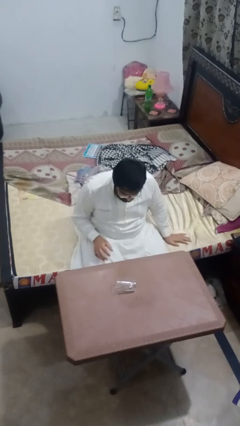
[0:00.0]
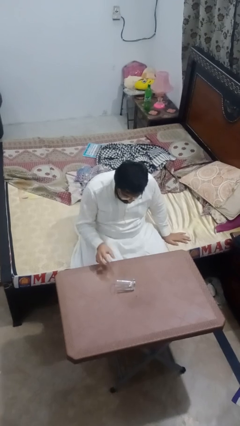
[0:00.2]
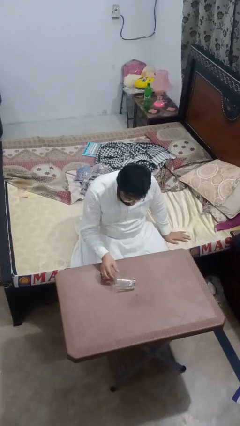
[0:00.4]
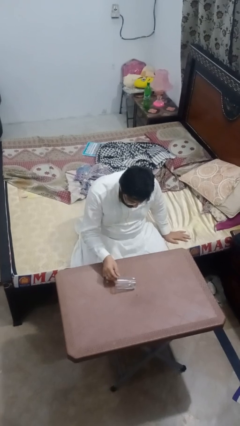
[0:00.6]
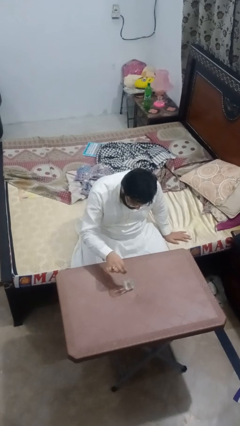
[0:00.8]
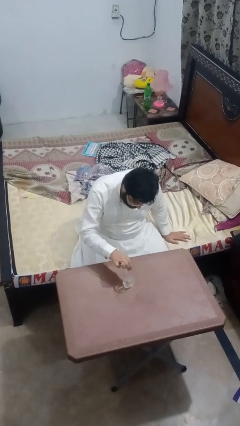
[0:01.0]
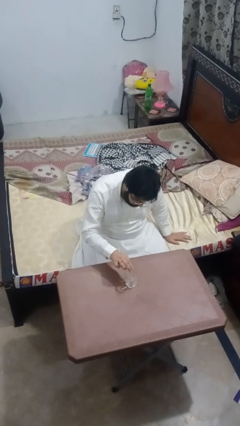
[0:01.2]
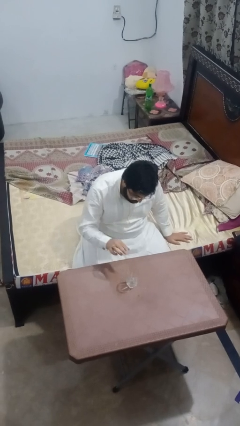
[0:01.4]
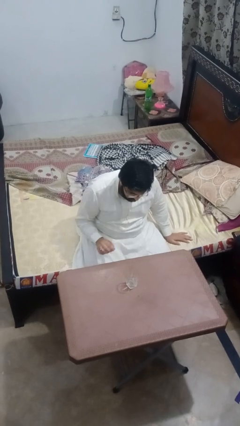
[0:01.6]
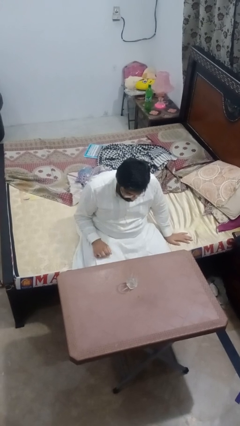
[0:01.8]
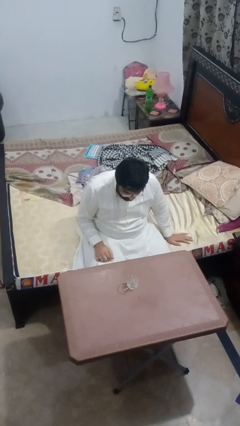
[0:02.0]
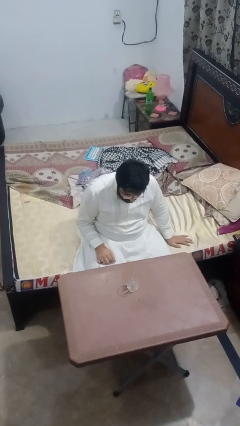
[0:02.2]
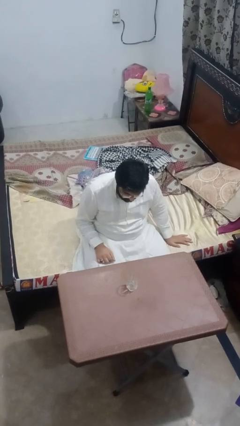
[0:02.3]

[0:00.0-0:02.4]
person sets upright glass

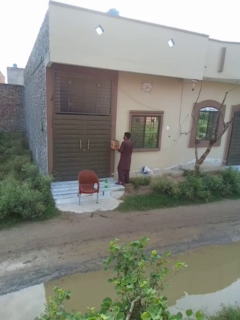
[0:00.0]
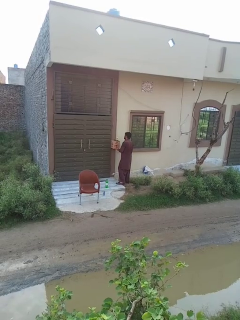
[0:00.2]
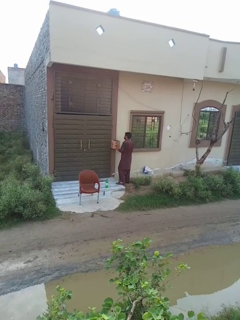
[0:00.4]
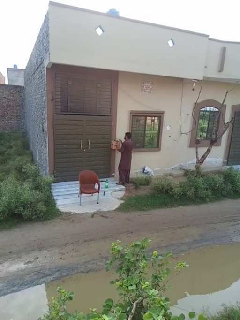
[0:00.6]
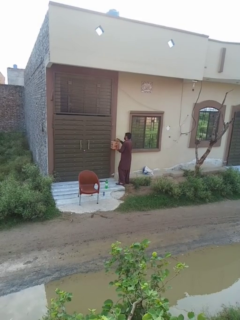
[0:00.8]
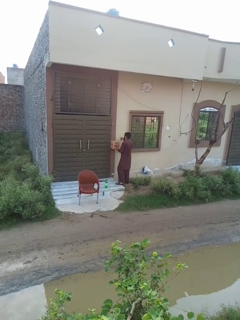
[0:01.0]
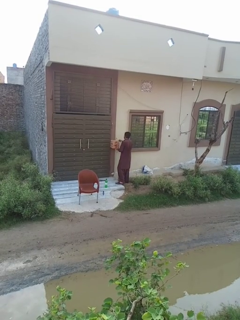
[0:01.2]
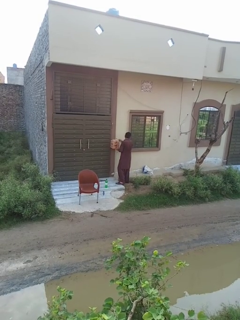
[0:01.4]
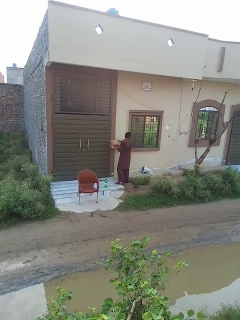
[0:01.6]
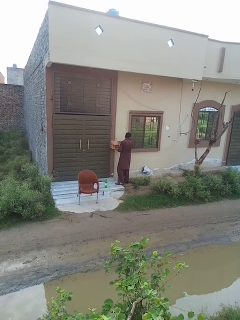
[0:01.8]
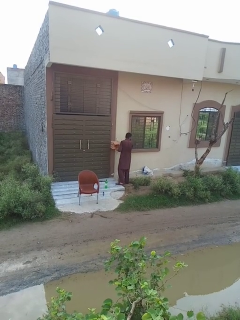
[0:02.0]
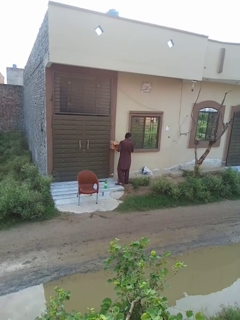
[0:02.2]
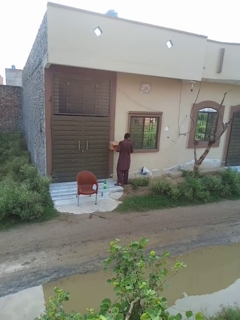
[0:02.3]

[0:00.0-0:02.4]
person opens mailbox

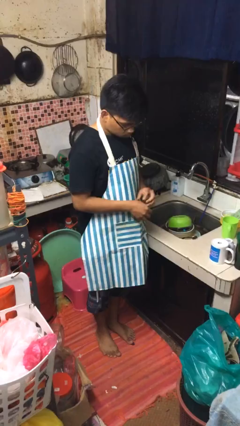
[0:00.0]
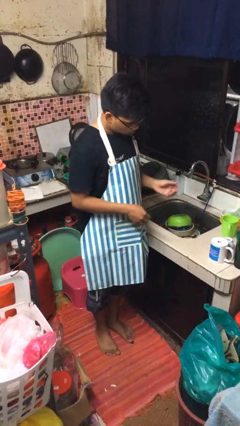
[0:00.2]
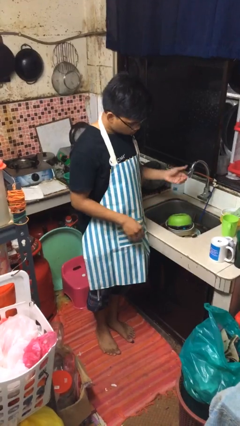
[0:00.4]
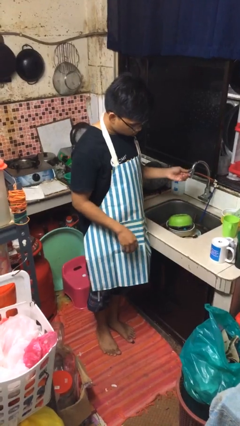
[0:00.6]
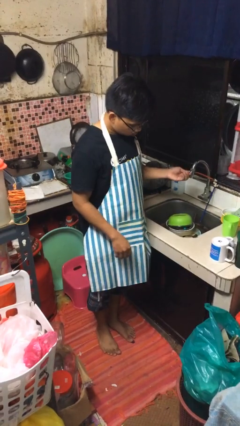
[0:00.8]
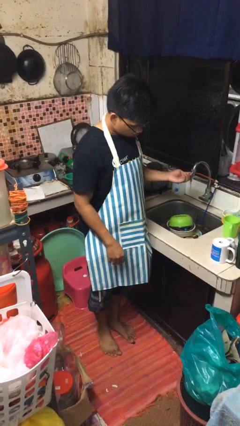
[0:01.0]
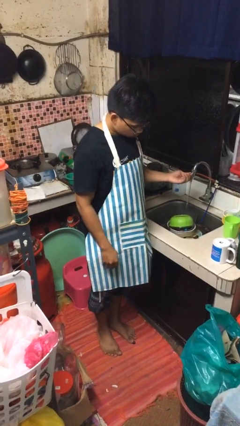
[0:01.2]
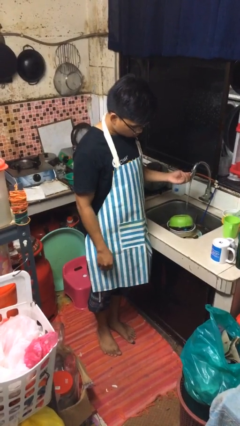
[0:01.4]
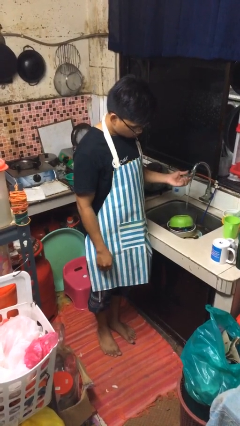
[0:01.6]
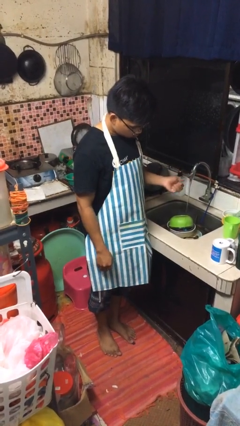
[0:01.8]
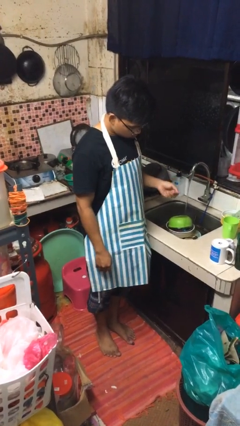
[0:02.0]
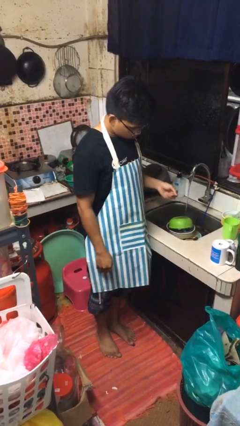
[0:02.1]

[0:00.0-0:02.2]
person turns on faucet

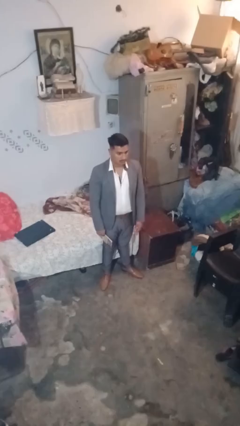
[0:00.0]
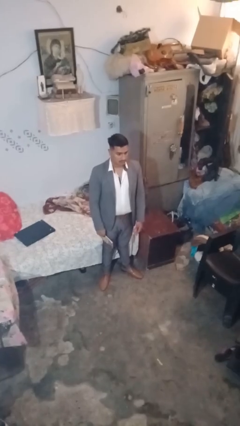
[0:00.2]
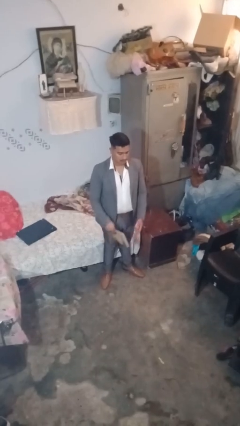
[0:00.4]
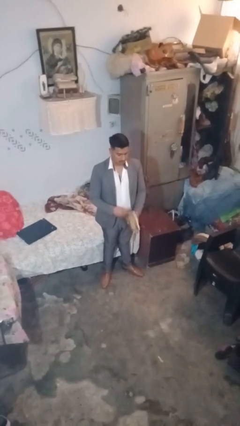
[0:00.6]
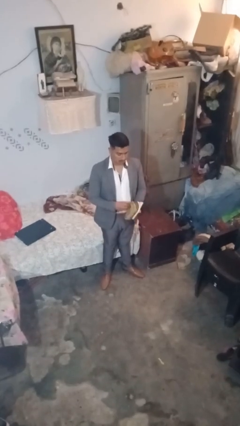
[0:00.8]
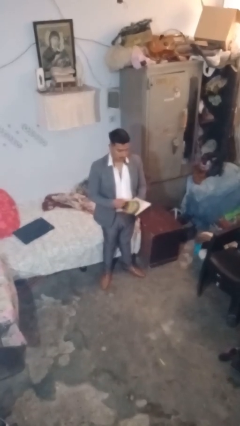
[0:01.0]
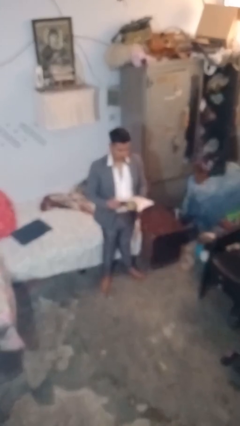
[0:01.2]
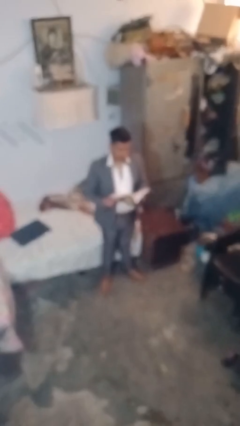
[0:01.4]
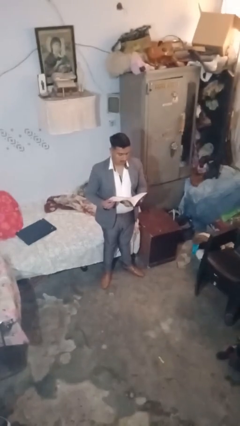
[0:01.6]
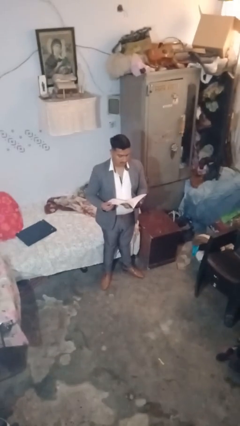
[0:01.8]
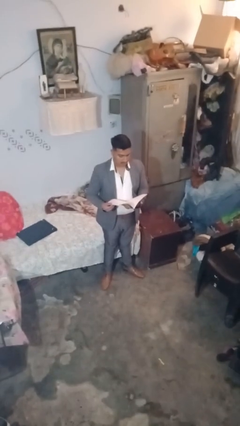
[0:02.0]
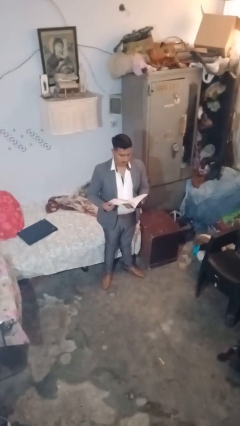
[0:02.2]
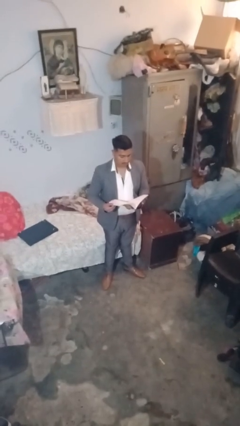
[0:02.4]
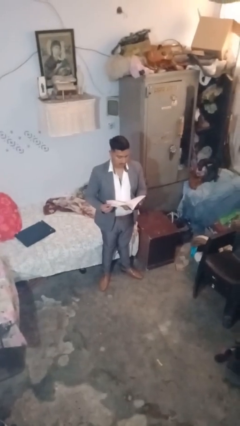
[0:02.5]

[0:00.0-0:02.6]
person reads document

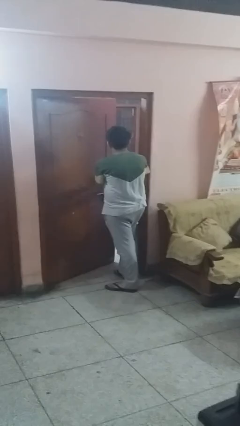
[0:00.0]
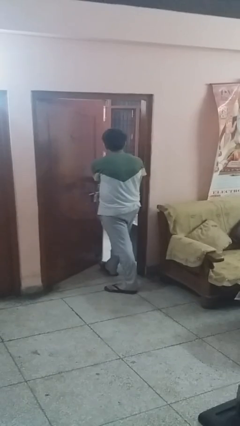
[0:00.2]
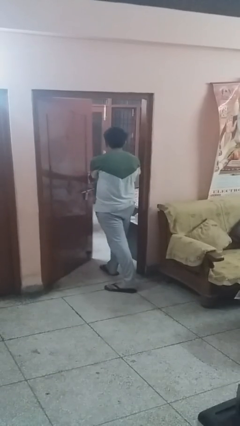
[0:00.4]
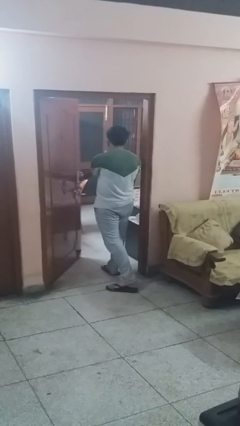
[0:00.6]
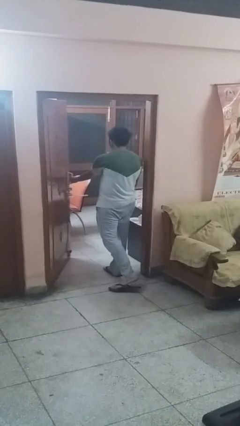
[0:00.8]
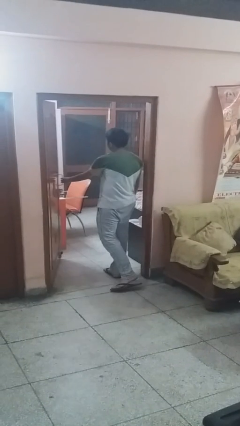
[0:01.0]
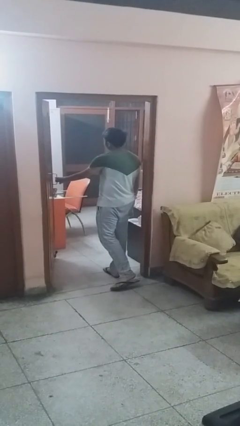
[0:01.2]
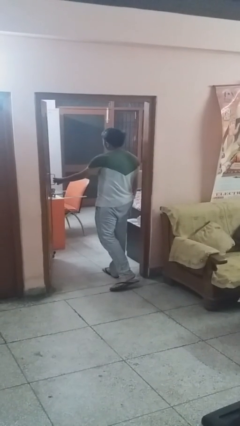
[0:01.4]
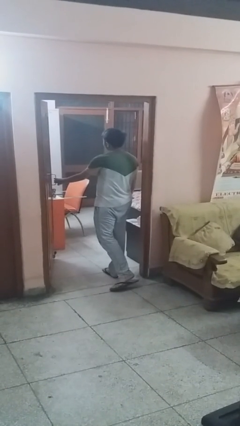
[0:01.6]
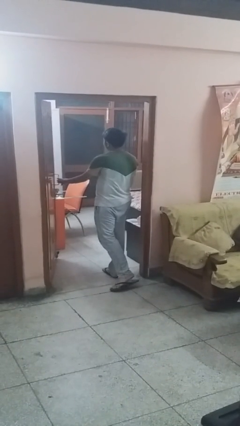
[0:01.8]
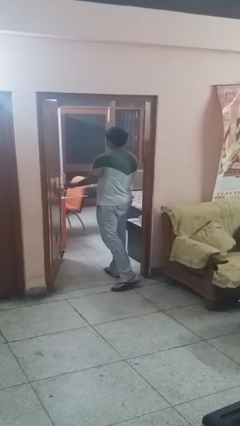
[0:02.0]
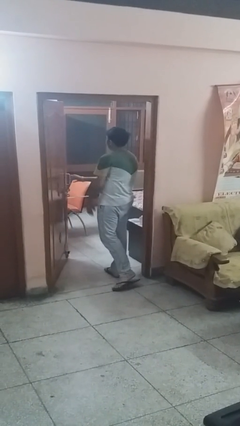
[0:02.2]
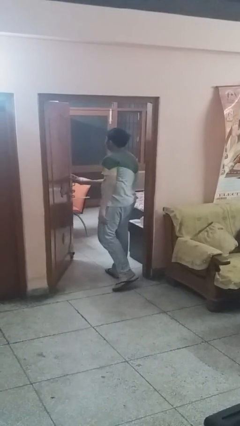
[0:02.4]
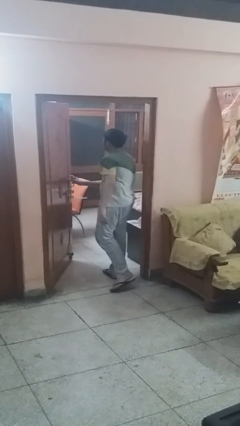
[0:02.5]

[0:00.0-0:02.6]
person opens facility door

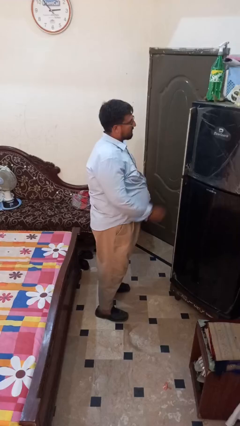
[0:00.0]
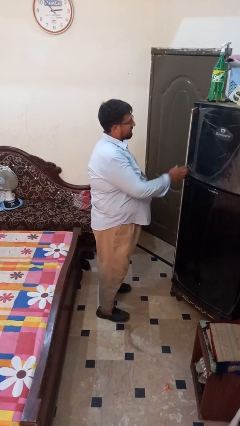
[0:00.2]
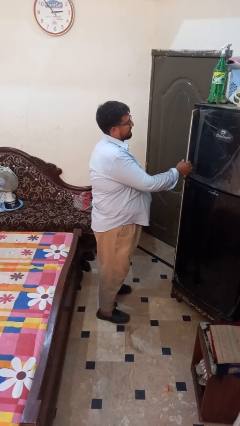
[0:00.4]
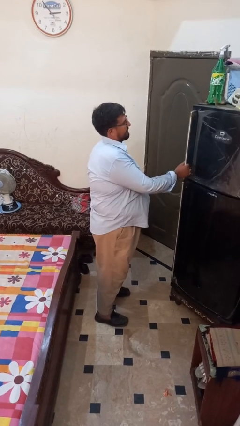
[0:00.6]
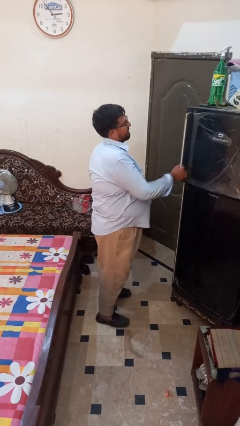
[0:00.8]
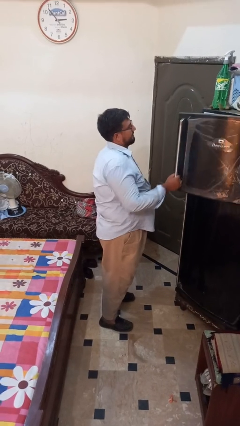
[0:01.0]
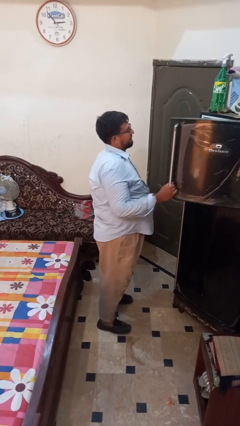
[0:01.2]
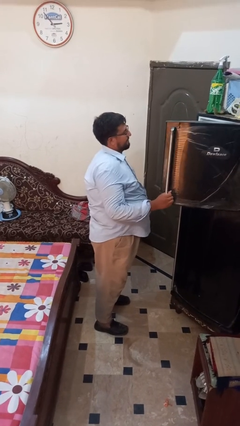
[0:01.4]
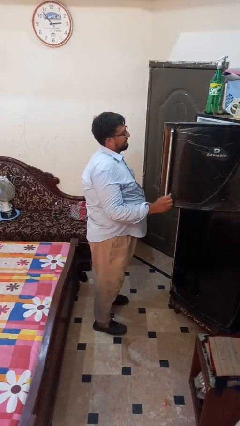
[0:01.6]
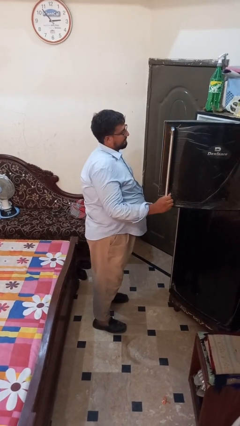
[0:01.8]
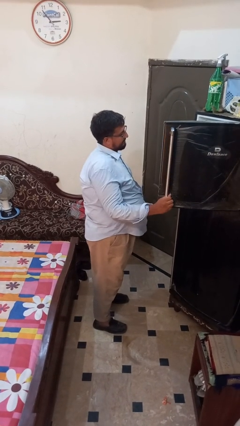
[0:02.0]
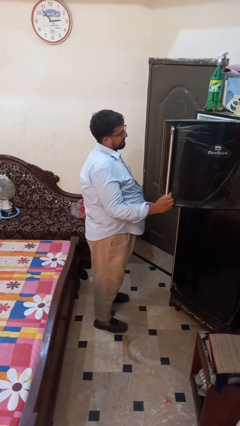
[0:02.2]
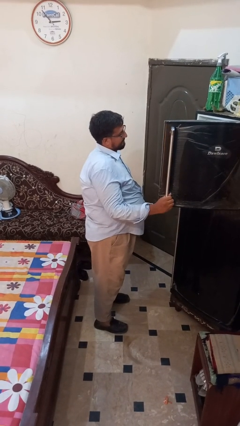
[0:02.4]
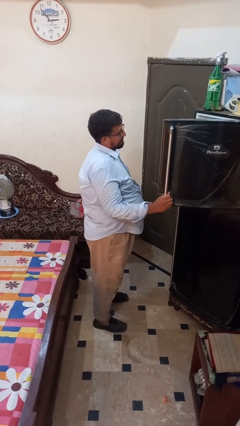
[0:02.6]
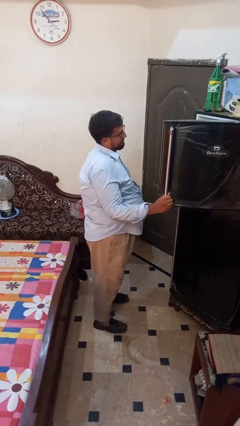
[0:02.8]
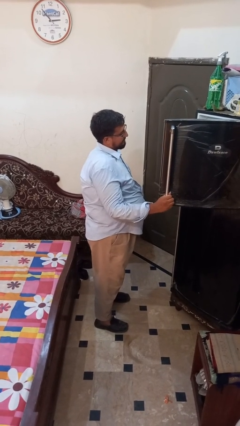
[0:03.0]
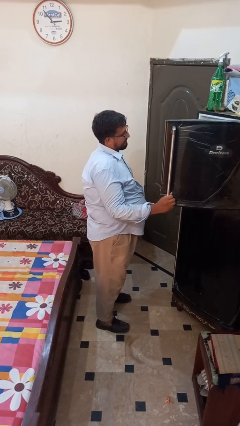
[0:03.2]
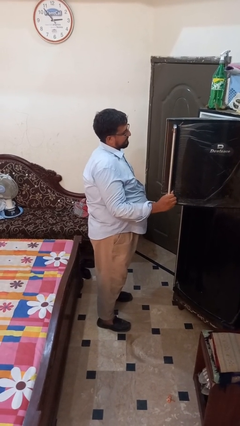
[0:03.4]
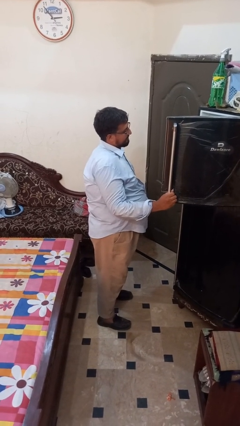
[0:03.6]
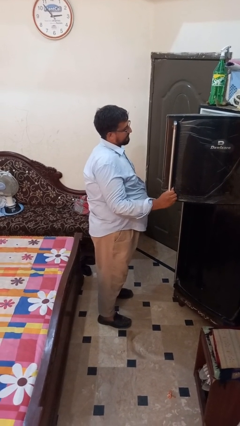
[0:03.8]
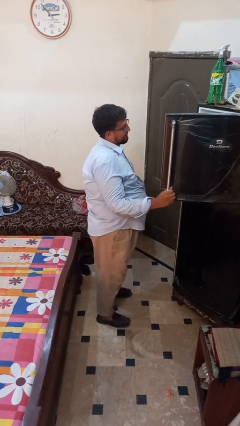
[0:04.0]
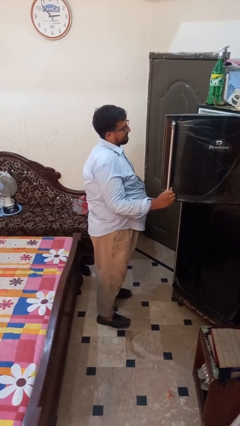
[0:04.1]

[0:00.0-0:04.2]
person opens refrigerator

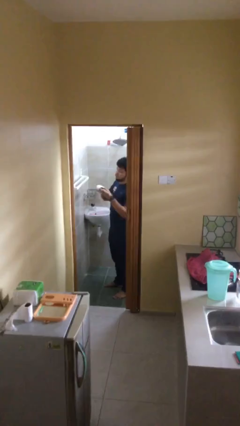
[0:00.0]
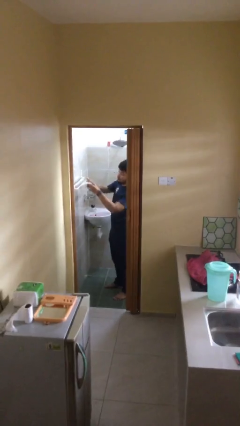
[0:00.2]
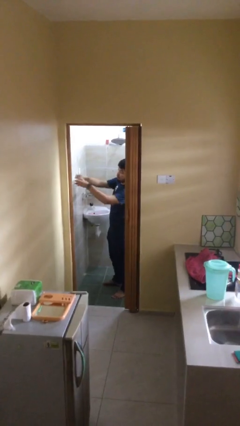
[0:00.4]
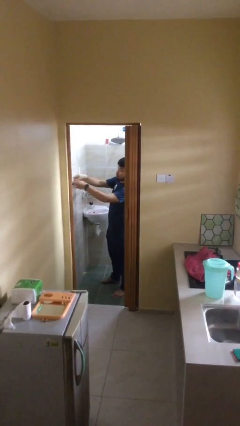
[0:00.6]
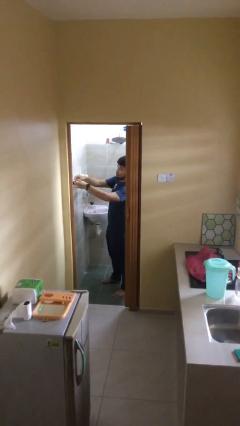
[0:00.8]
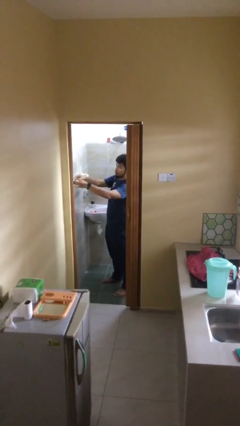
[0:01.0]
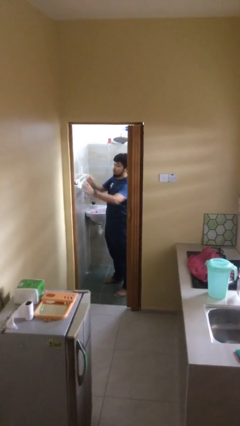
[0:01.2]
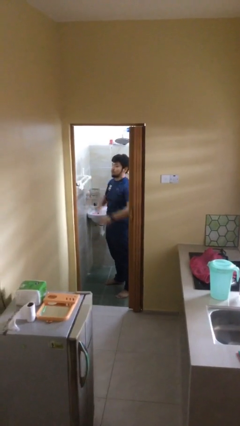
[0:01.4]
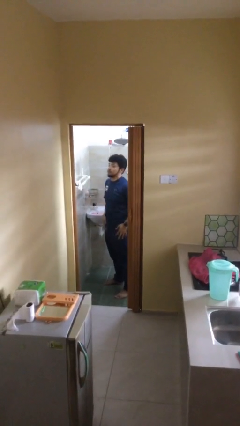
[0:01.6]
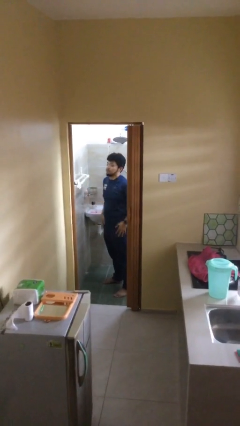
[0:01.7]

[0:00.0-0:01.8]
person puts down object on countertop
